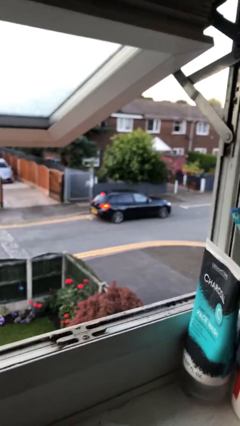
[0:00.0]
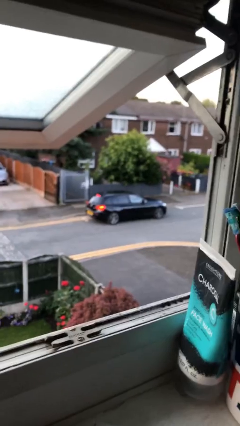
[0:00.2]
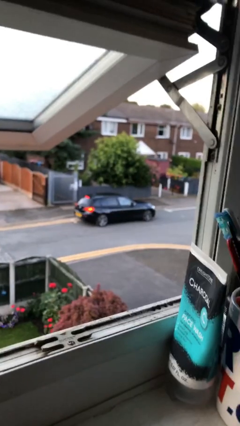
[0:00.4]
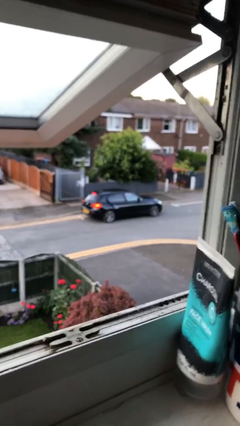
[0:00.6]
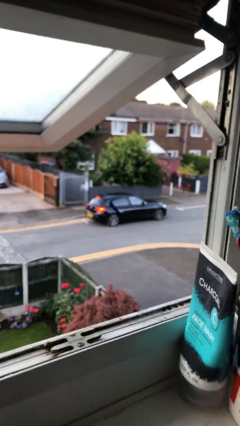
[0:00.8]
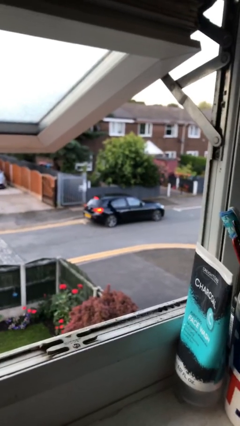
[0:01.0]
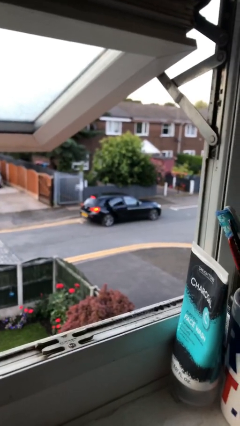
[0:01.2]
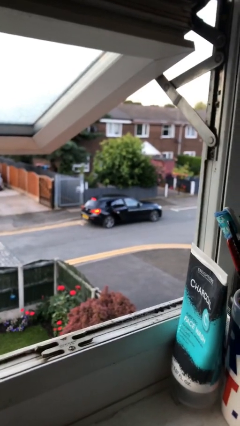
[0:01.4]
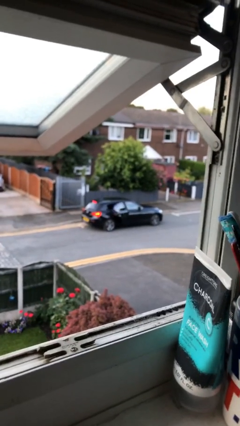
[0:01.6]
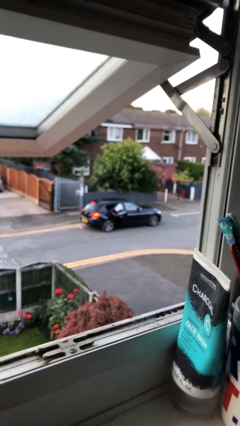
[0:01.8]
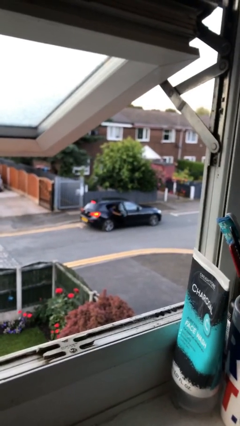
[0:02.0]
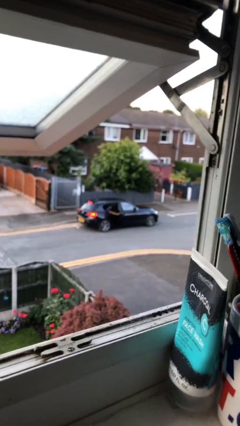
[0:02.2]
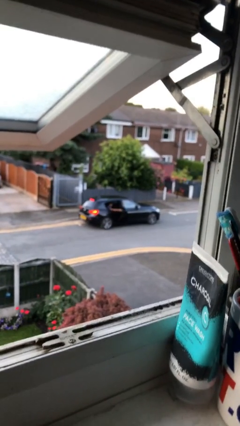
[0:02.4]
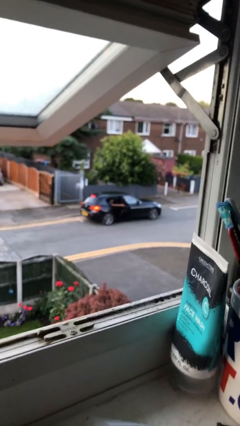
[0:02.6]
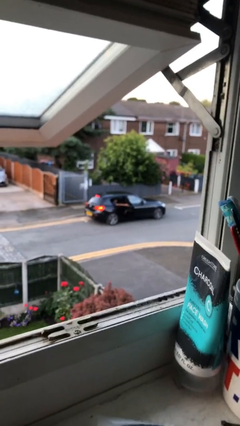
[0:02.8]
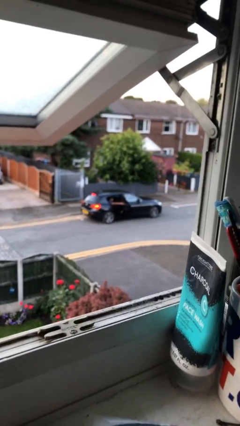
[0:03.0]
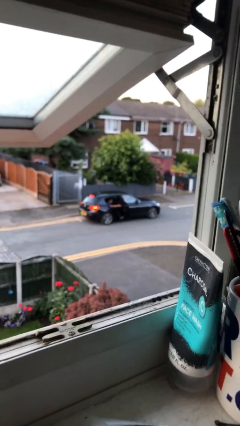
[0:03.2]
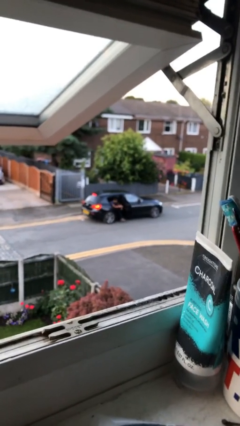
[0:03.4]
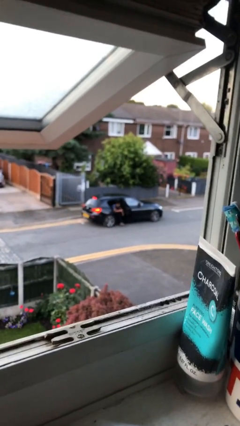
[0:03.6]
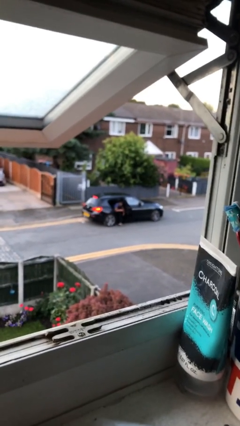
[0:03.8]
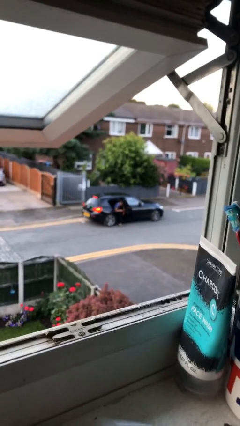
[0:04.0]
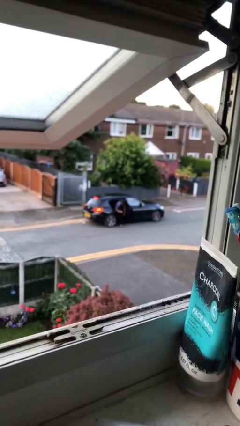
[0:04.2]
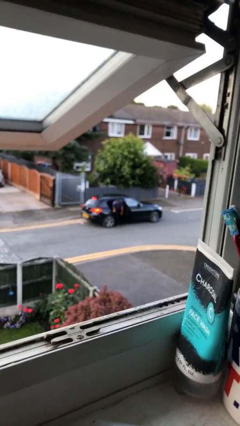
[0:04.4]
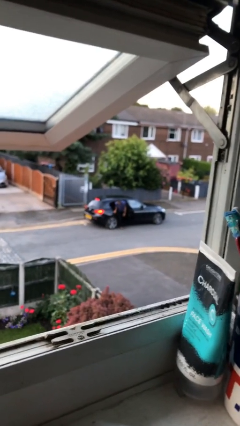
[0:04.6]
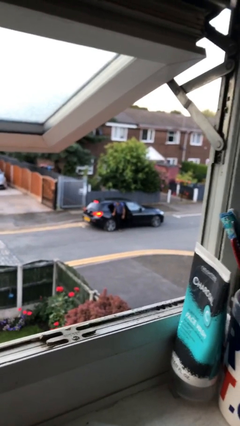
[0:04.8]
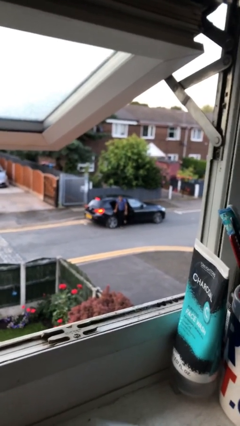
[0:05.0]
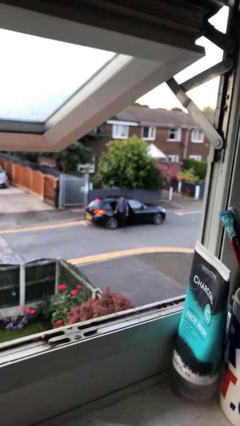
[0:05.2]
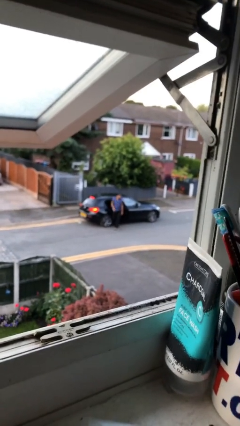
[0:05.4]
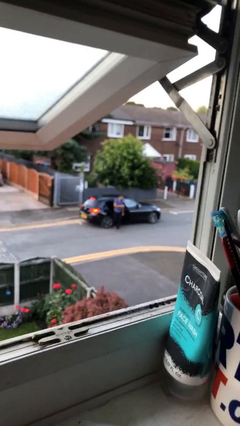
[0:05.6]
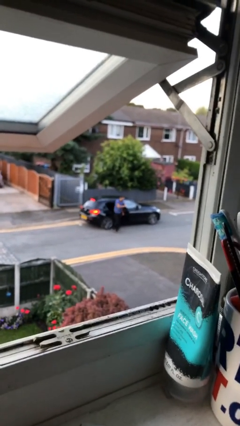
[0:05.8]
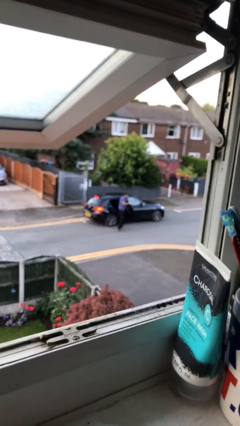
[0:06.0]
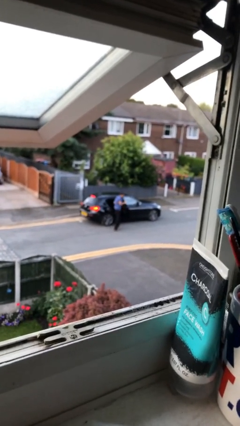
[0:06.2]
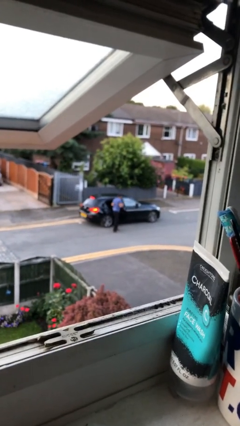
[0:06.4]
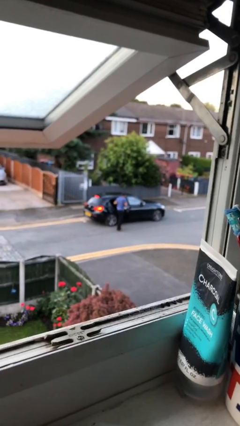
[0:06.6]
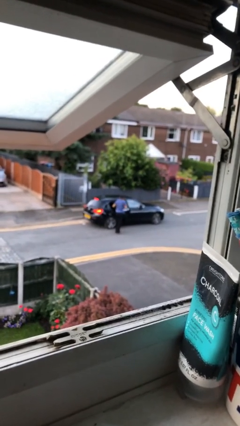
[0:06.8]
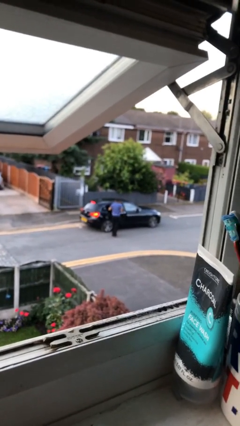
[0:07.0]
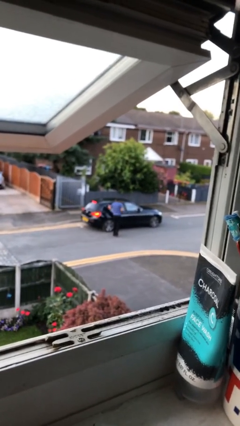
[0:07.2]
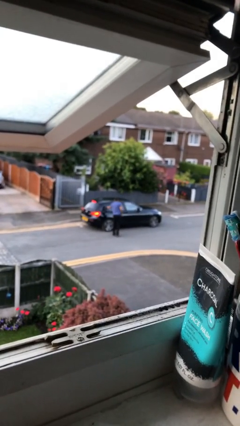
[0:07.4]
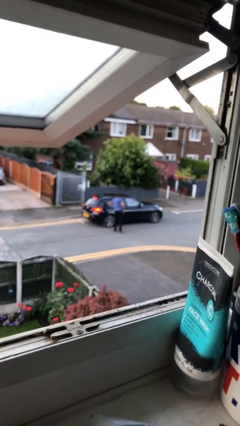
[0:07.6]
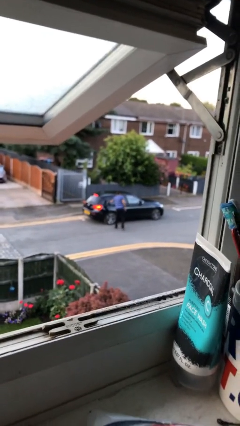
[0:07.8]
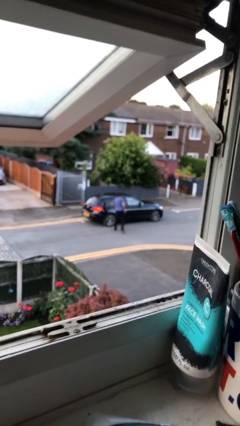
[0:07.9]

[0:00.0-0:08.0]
car drops off person

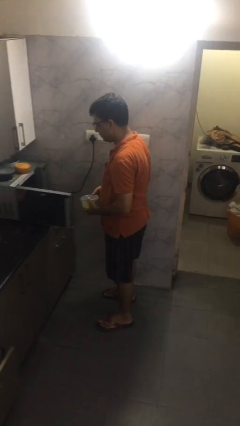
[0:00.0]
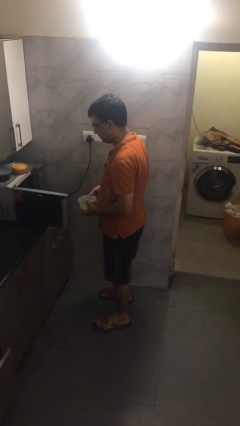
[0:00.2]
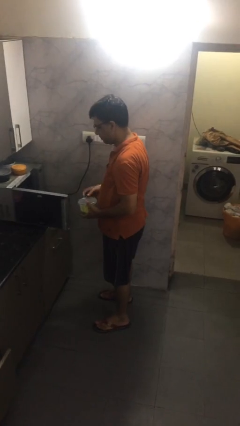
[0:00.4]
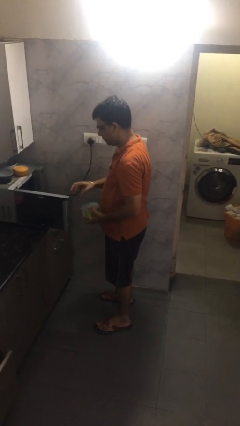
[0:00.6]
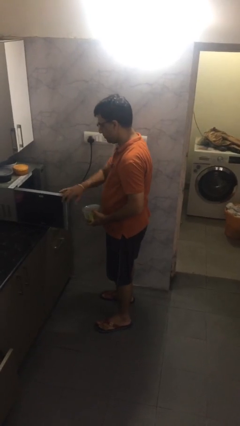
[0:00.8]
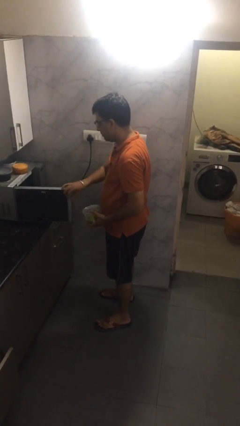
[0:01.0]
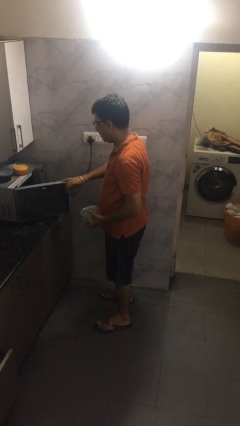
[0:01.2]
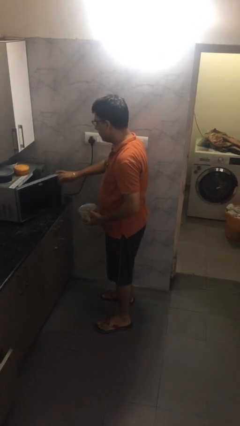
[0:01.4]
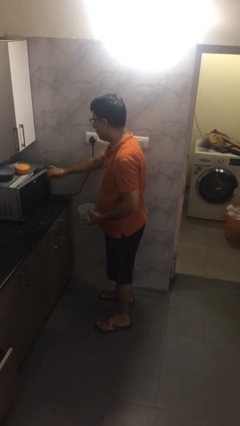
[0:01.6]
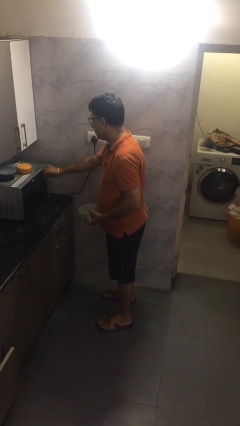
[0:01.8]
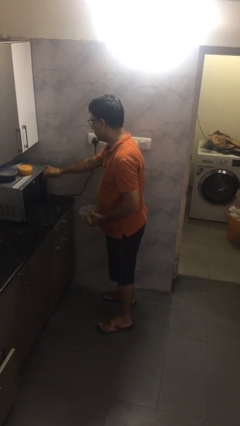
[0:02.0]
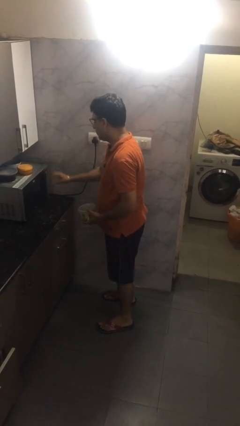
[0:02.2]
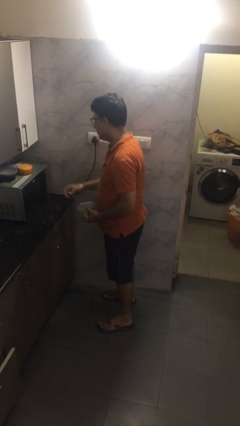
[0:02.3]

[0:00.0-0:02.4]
person closes microwave

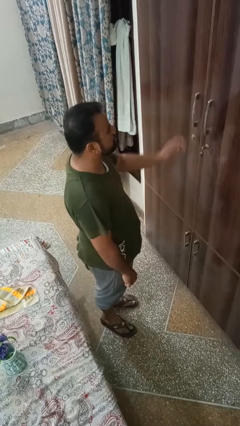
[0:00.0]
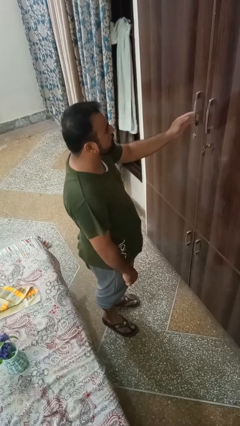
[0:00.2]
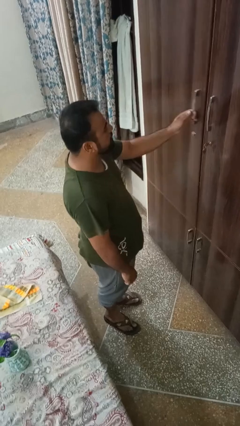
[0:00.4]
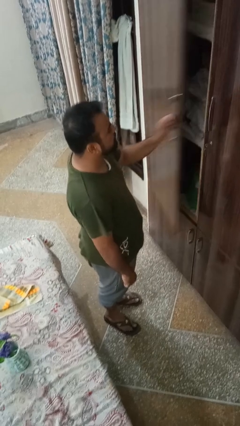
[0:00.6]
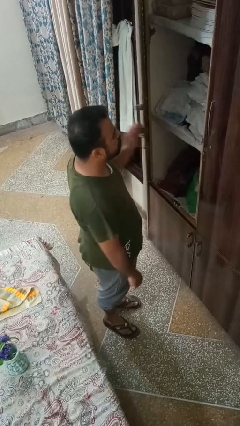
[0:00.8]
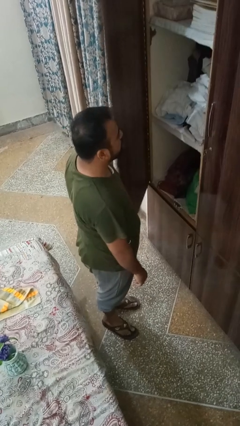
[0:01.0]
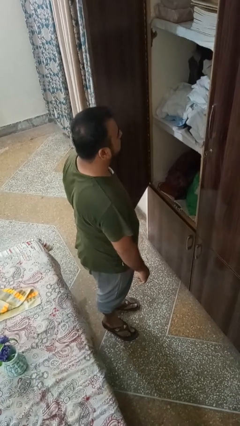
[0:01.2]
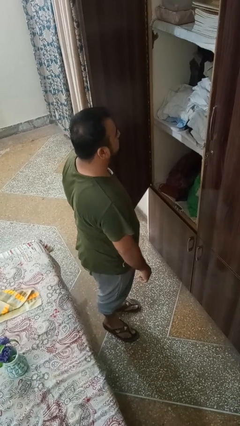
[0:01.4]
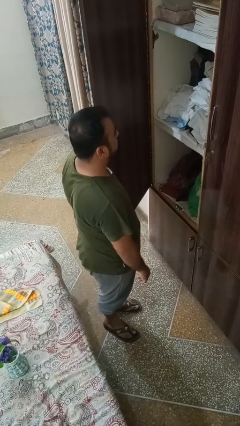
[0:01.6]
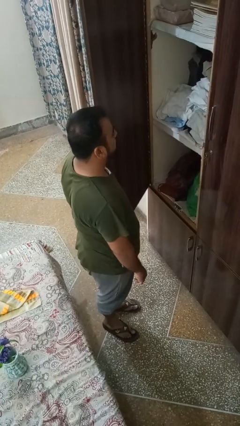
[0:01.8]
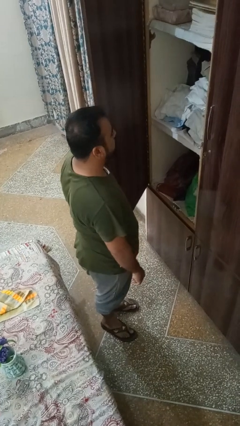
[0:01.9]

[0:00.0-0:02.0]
person opens closet door

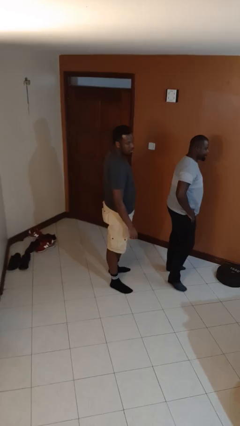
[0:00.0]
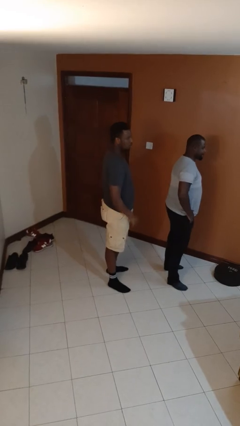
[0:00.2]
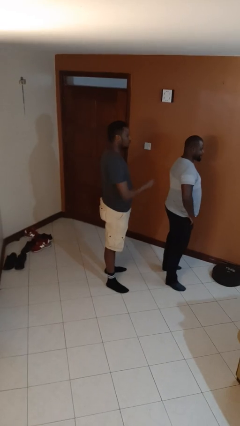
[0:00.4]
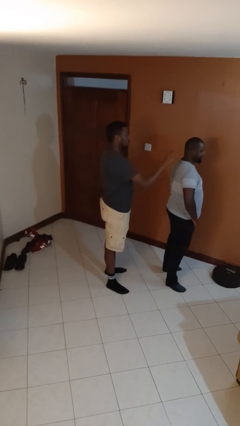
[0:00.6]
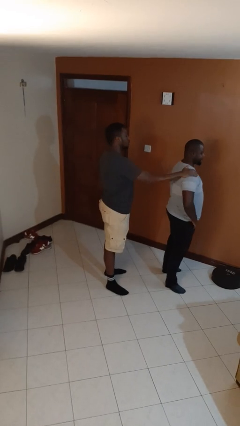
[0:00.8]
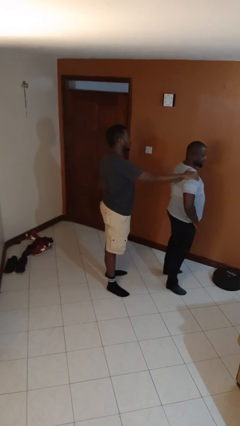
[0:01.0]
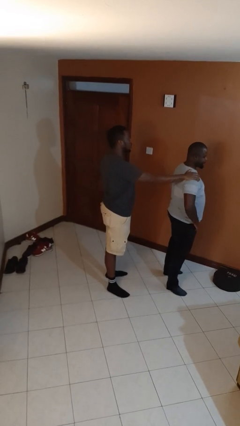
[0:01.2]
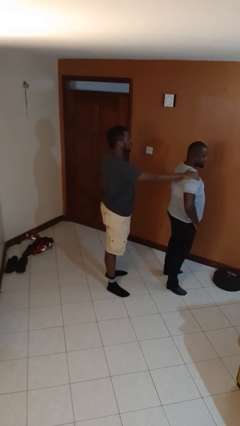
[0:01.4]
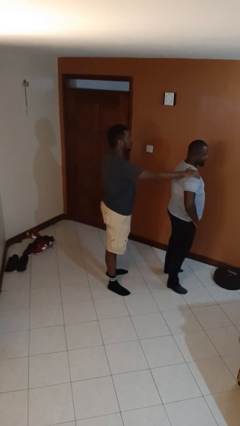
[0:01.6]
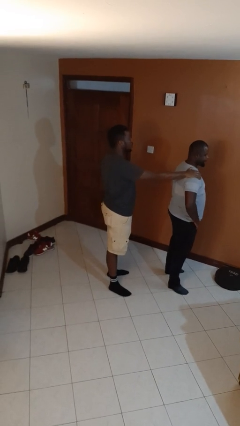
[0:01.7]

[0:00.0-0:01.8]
person grabs person by shoulder

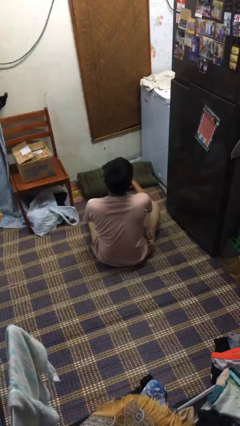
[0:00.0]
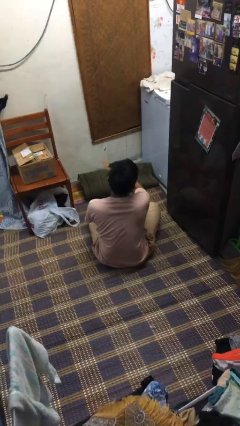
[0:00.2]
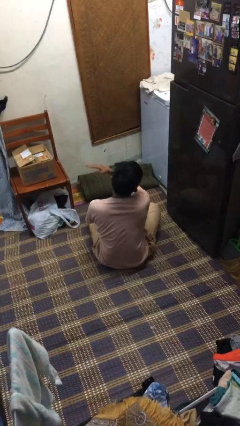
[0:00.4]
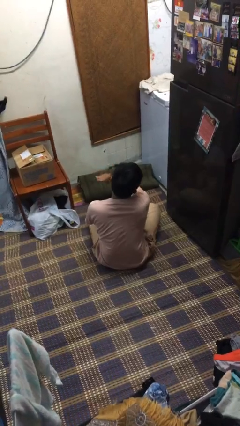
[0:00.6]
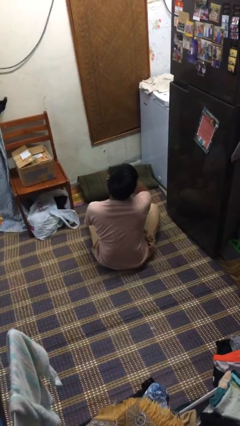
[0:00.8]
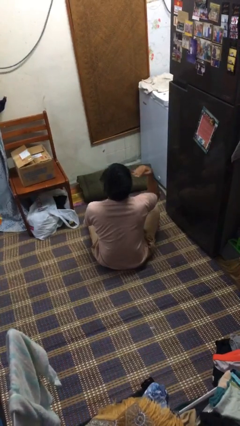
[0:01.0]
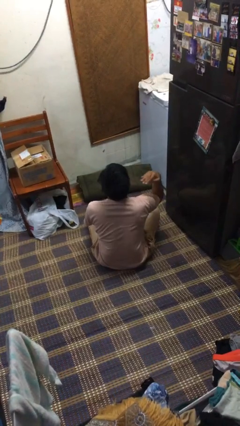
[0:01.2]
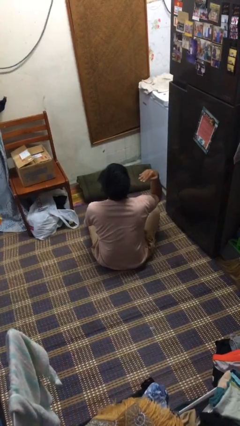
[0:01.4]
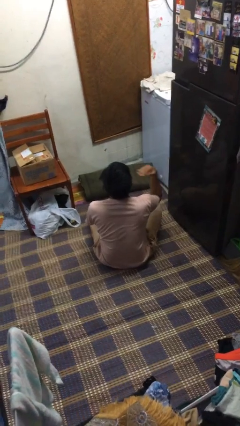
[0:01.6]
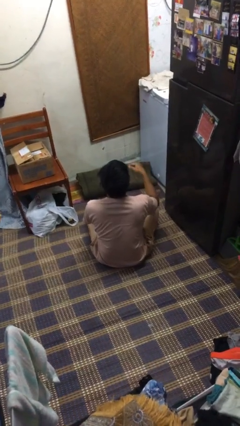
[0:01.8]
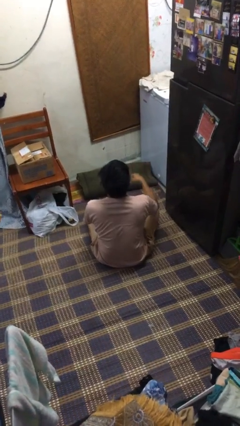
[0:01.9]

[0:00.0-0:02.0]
person gestures cut

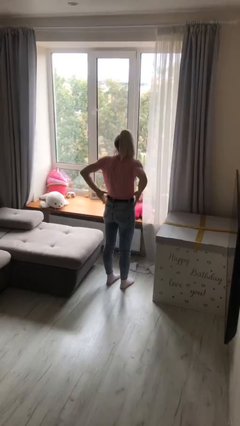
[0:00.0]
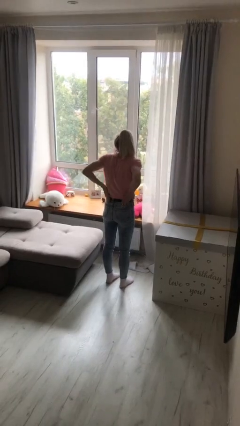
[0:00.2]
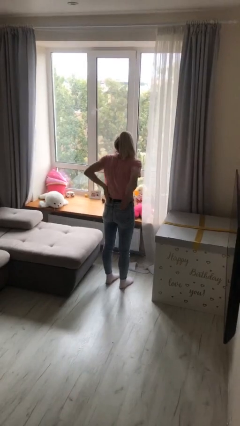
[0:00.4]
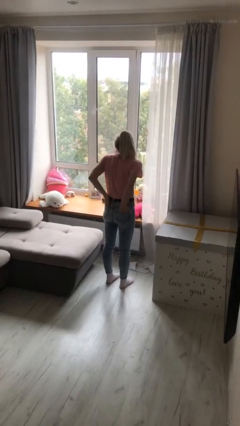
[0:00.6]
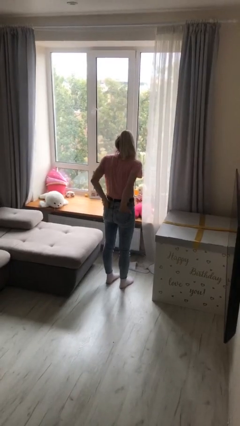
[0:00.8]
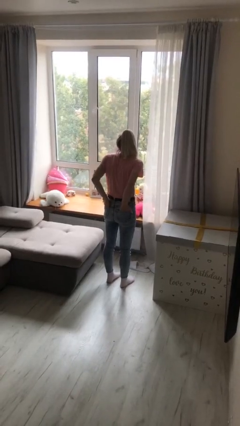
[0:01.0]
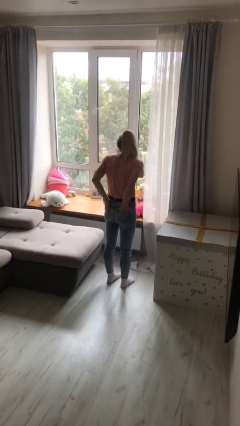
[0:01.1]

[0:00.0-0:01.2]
person puts hands in back pockets
